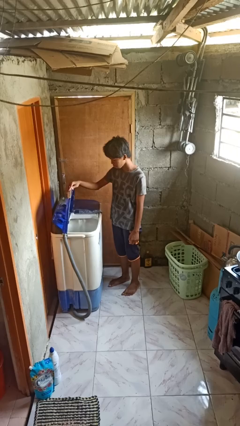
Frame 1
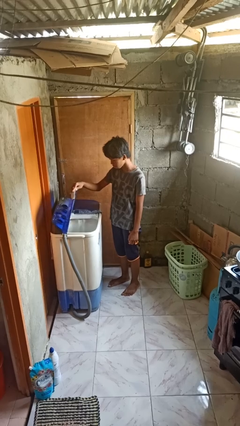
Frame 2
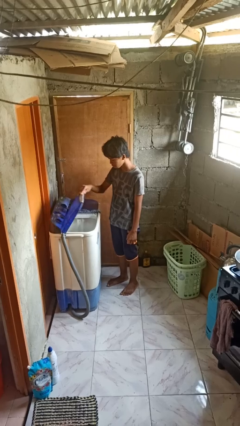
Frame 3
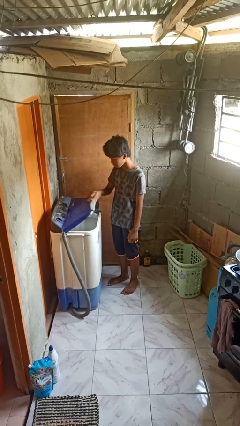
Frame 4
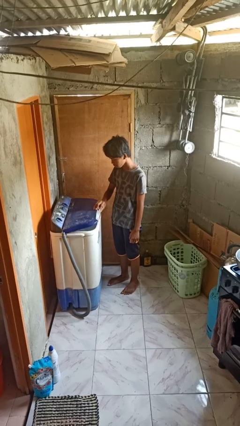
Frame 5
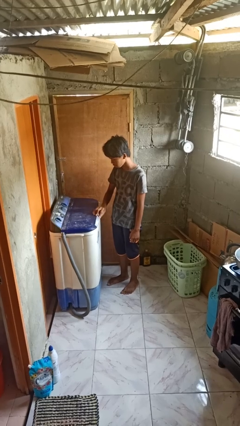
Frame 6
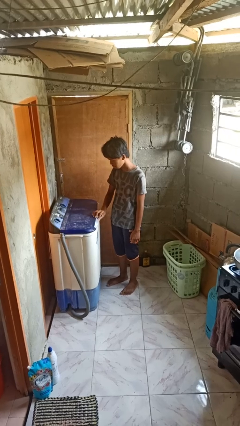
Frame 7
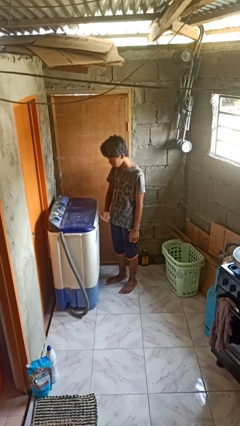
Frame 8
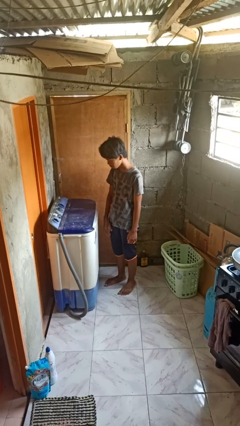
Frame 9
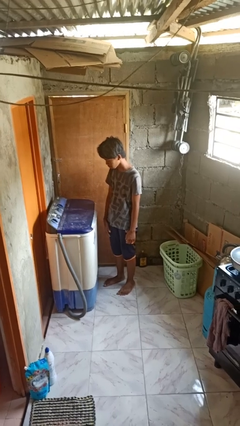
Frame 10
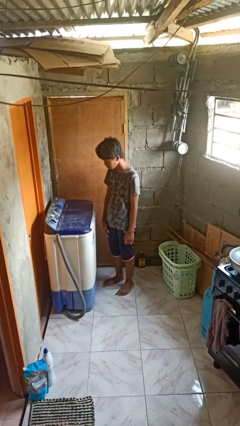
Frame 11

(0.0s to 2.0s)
person closes clothes washer

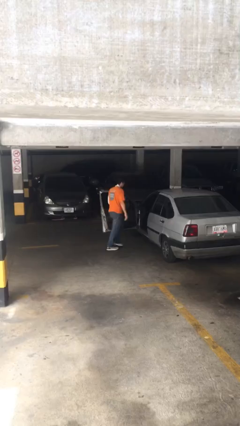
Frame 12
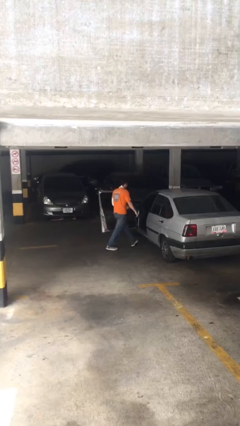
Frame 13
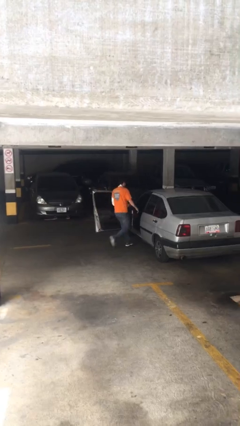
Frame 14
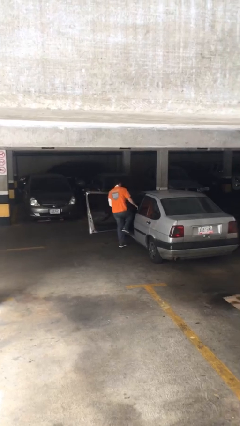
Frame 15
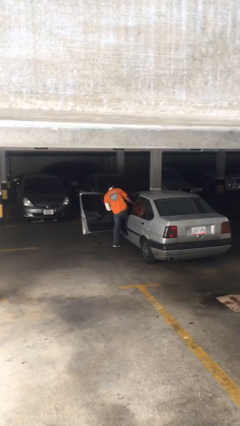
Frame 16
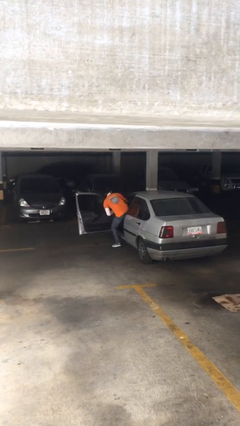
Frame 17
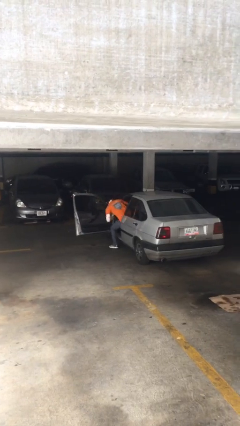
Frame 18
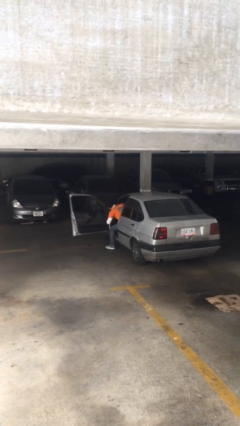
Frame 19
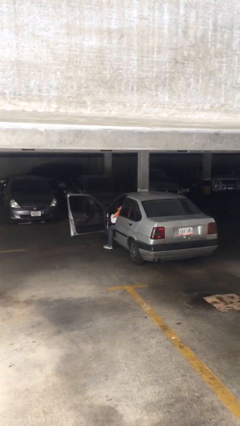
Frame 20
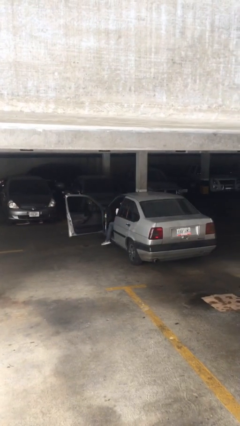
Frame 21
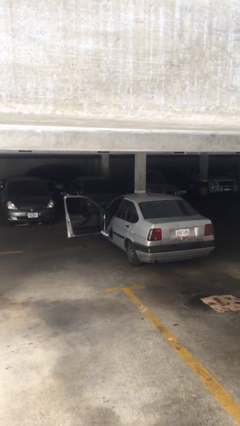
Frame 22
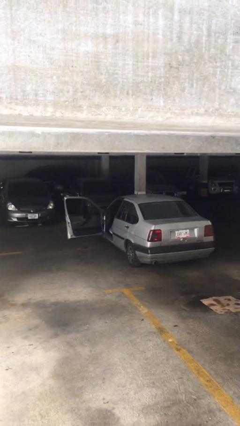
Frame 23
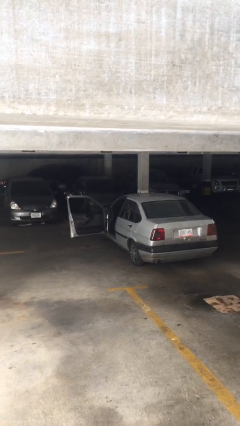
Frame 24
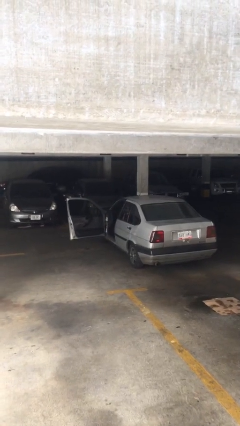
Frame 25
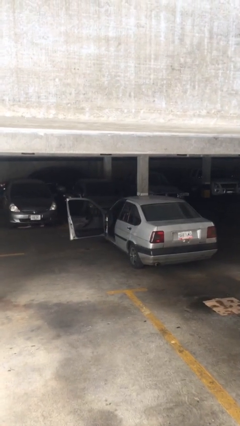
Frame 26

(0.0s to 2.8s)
person enters car

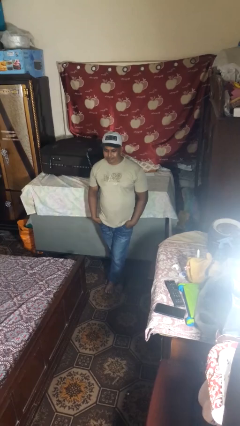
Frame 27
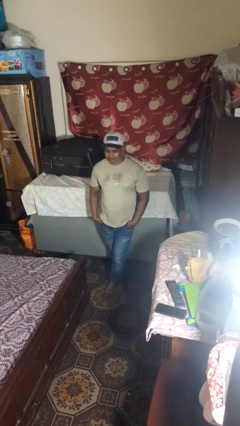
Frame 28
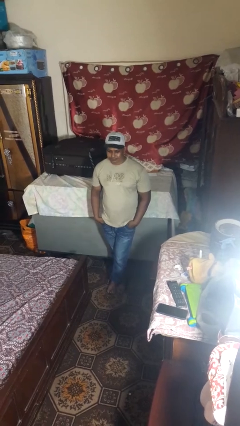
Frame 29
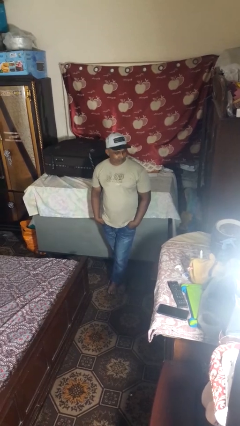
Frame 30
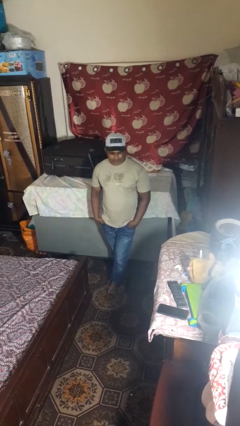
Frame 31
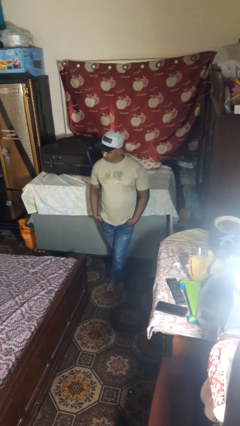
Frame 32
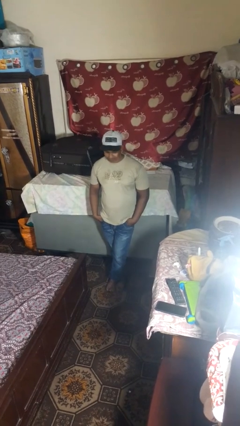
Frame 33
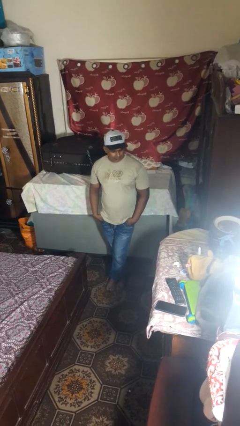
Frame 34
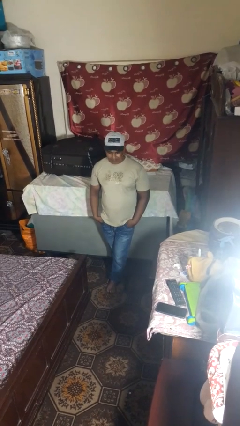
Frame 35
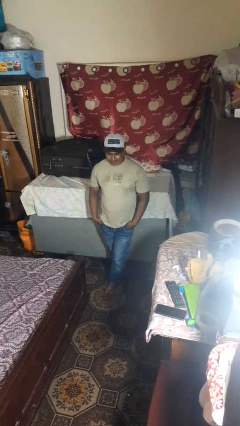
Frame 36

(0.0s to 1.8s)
person shakes head

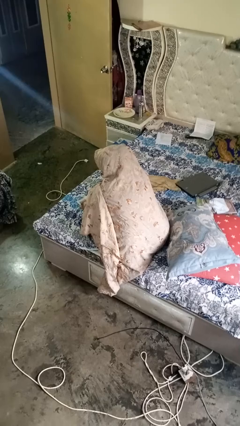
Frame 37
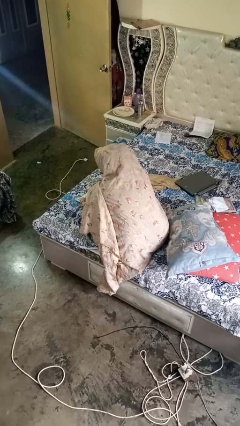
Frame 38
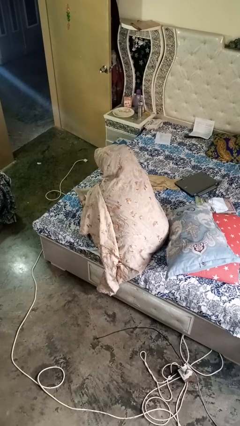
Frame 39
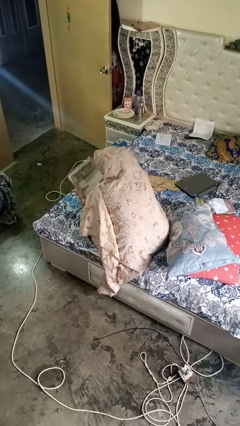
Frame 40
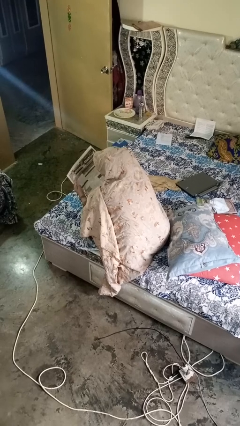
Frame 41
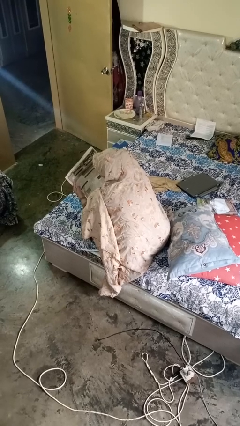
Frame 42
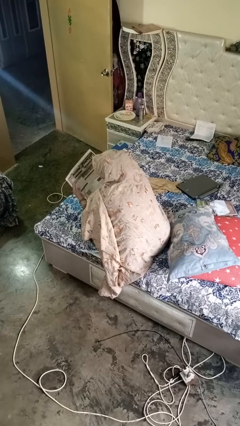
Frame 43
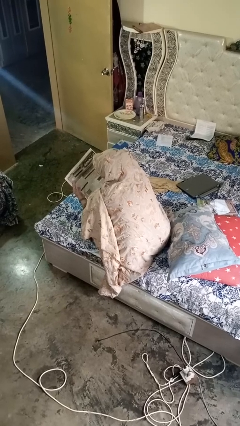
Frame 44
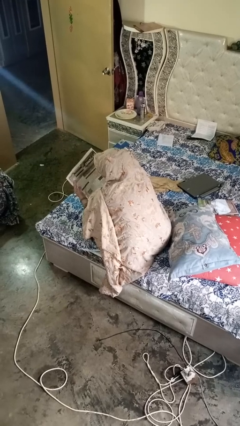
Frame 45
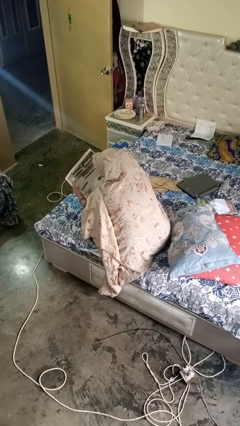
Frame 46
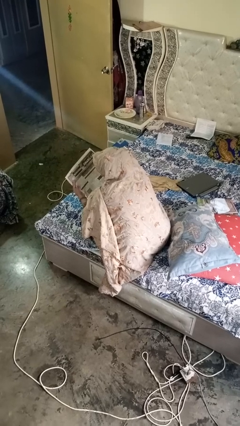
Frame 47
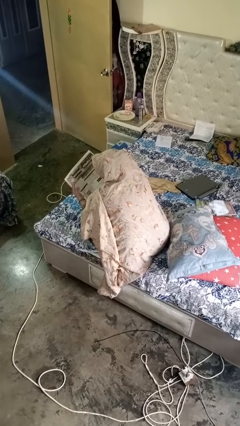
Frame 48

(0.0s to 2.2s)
person reads newspaper

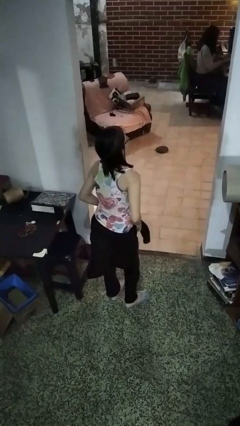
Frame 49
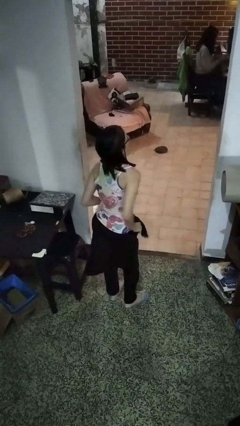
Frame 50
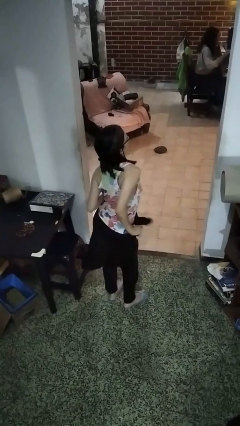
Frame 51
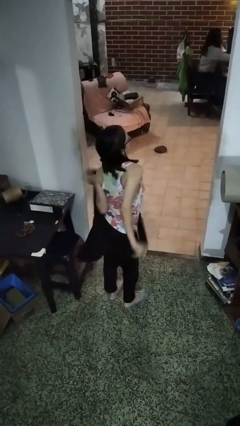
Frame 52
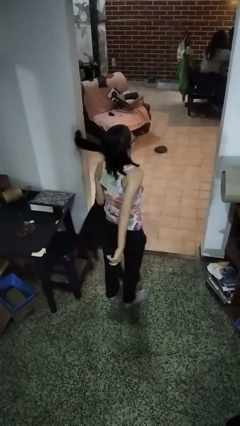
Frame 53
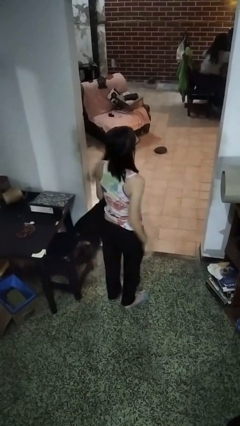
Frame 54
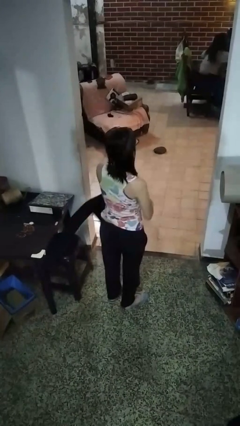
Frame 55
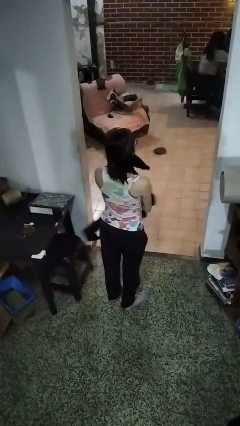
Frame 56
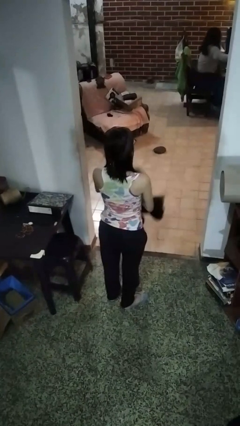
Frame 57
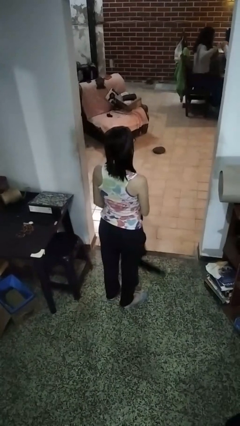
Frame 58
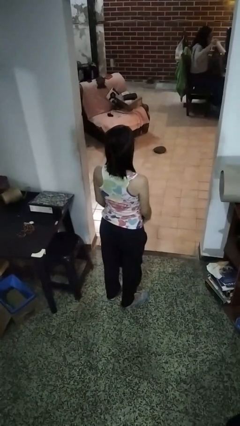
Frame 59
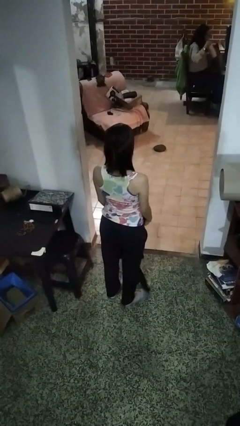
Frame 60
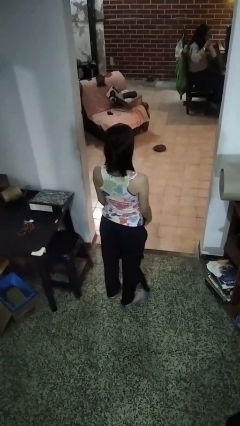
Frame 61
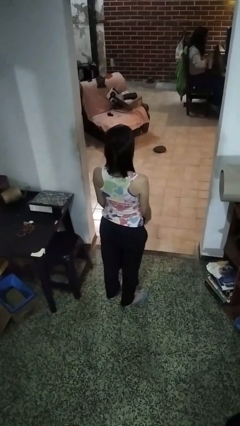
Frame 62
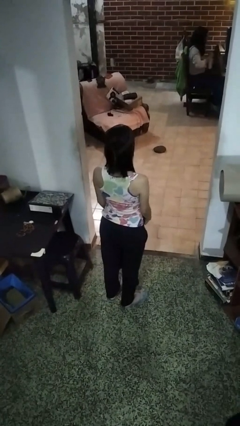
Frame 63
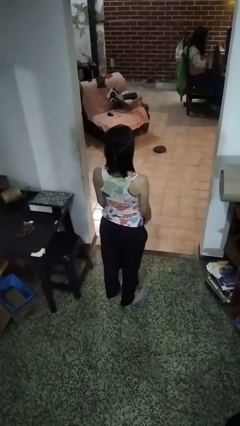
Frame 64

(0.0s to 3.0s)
person unties jacket around waist

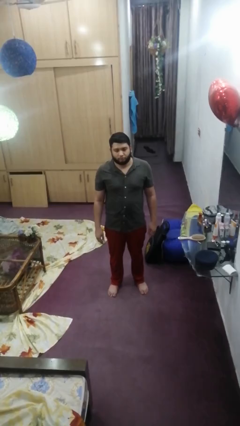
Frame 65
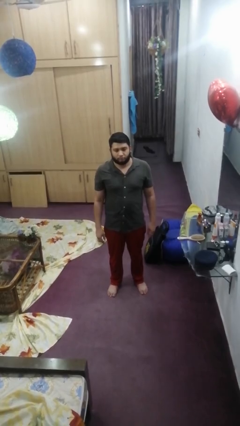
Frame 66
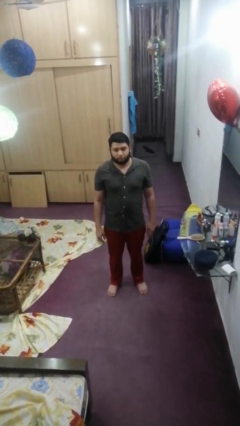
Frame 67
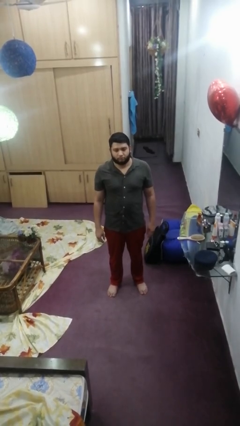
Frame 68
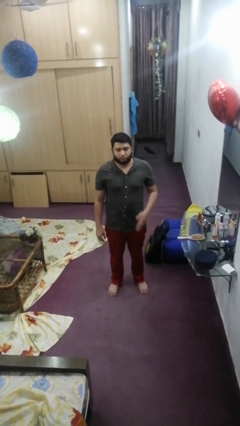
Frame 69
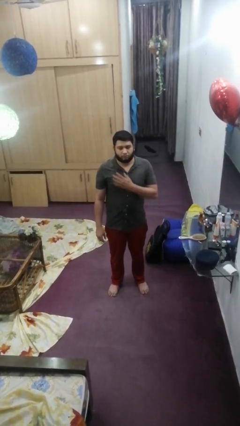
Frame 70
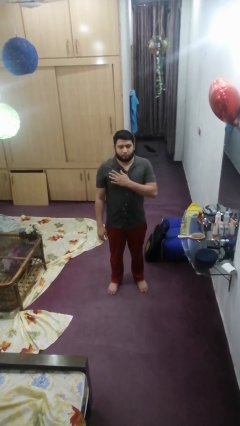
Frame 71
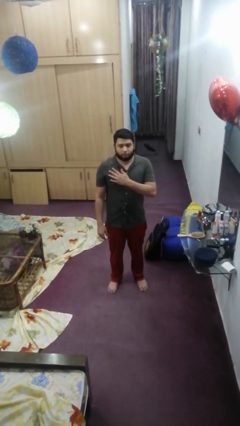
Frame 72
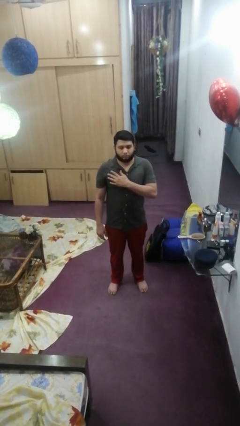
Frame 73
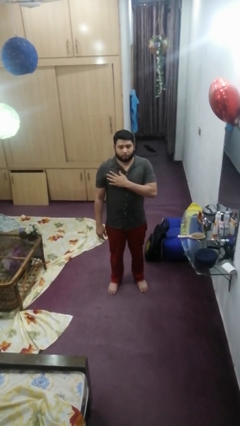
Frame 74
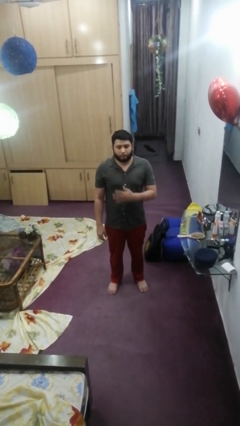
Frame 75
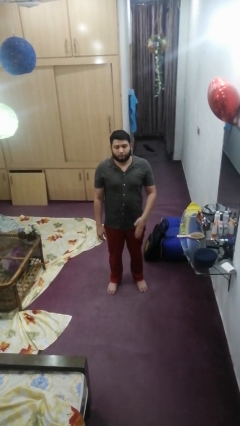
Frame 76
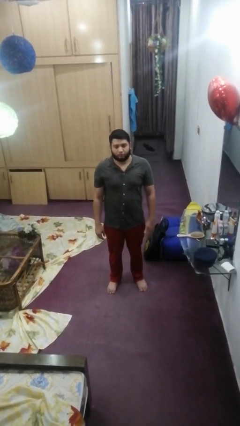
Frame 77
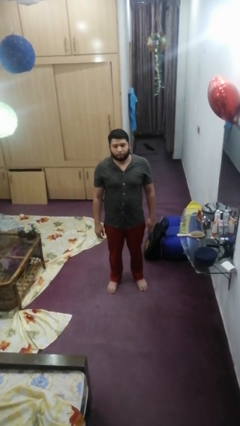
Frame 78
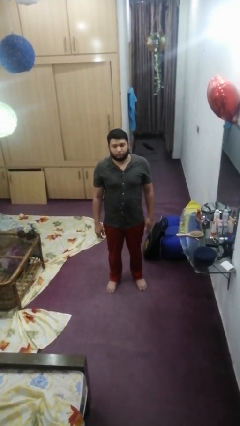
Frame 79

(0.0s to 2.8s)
person drums on chest

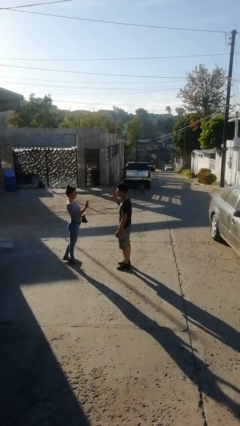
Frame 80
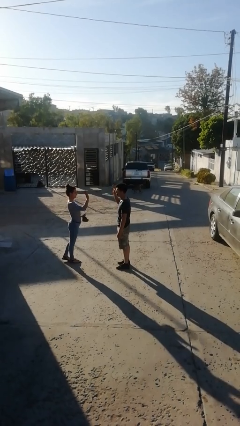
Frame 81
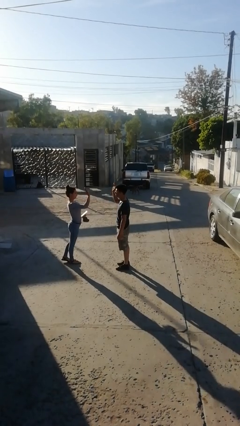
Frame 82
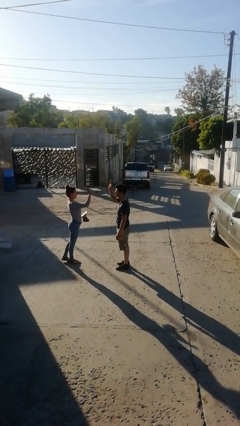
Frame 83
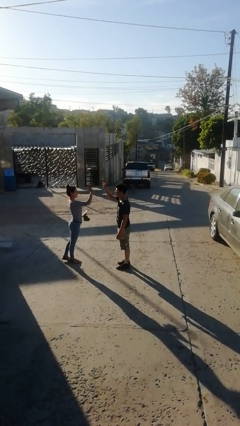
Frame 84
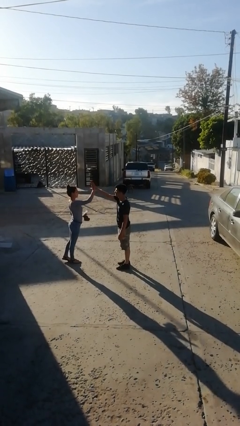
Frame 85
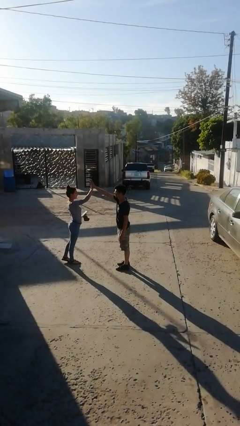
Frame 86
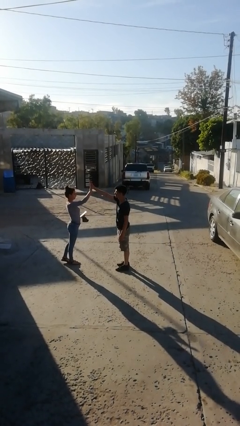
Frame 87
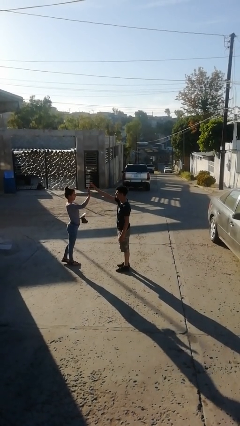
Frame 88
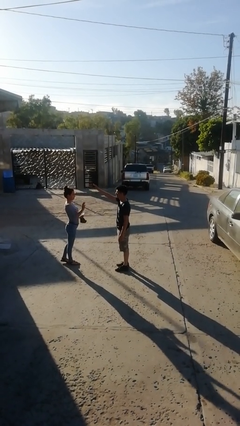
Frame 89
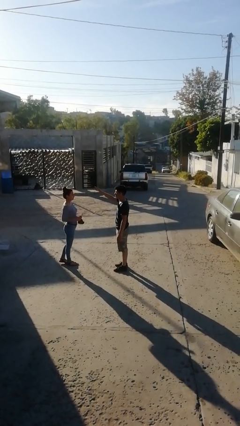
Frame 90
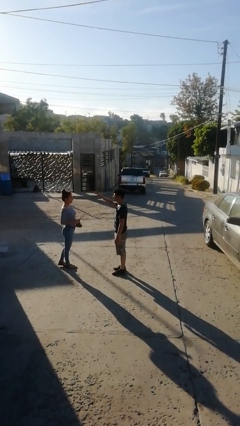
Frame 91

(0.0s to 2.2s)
person highfives hand

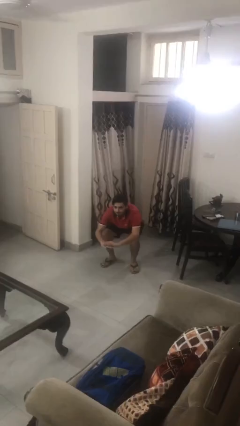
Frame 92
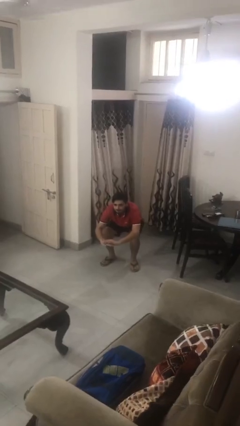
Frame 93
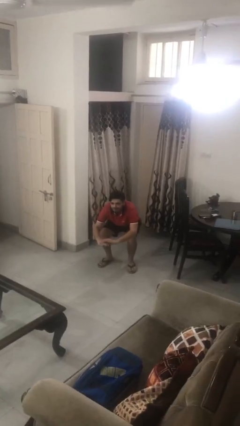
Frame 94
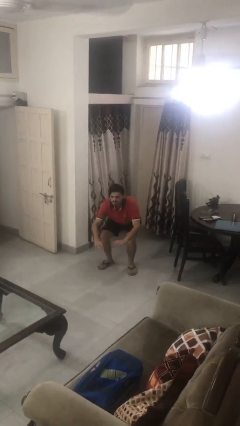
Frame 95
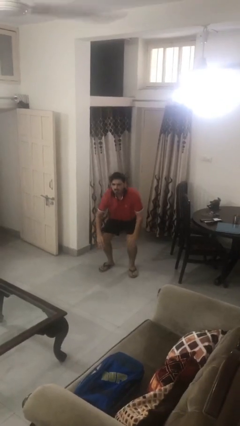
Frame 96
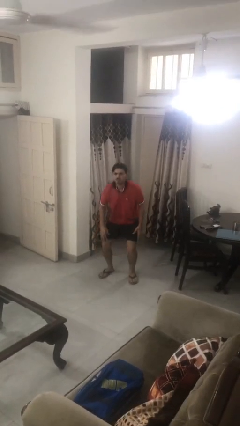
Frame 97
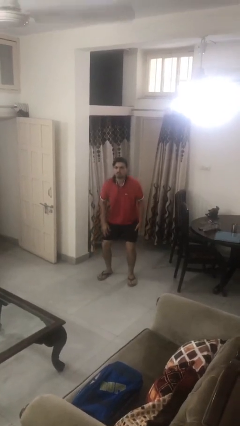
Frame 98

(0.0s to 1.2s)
person stands up
